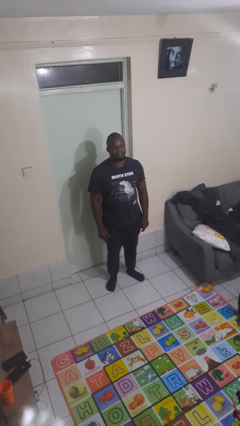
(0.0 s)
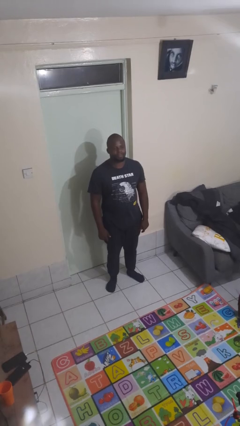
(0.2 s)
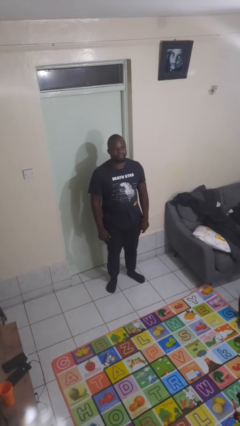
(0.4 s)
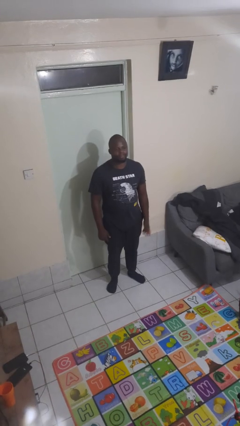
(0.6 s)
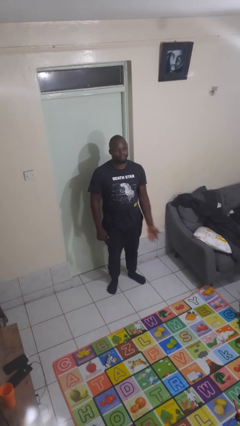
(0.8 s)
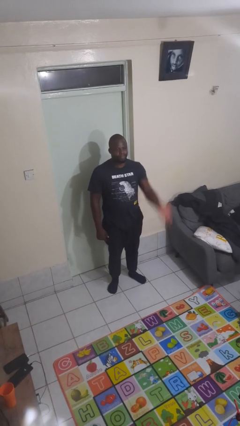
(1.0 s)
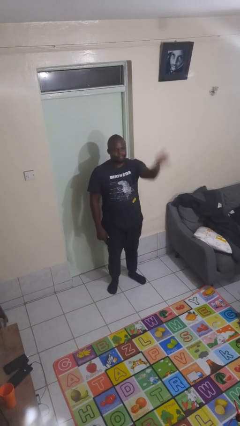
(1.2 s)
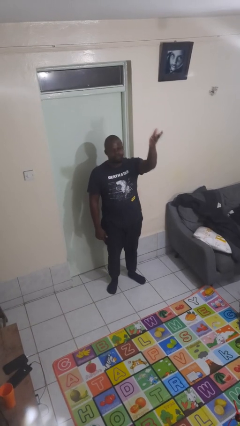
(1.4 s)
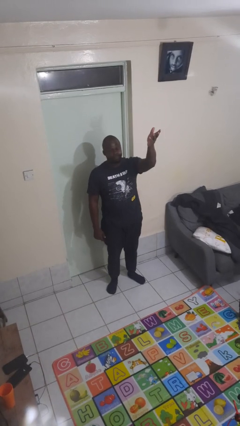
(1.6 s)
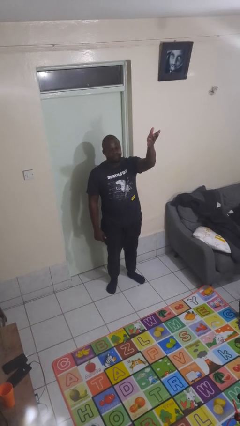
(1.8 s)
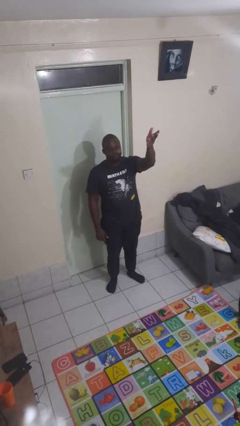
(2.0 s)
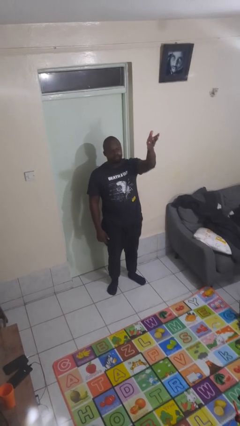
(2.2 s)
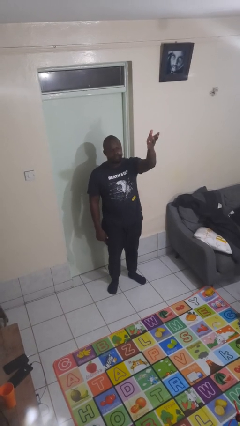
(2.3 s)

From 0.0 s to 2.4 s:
person gestures swipe up

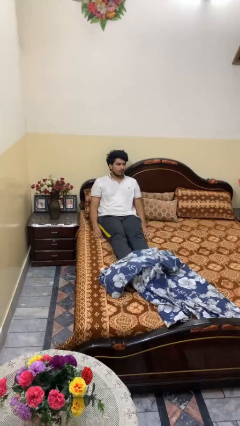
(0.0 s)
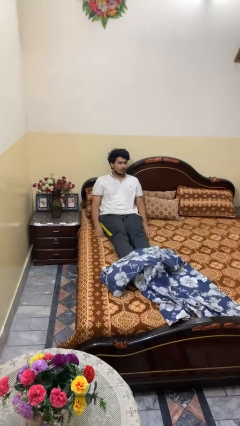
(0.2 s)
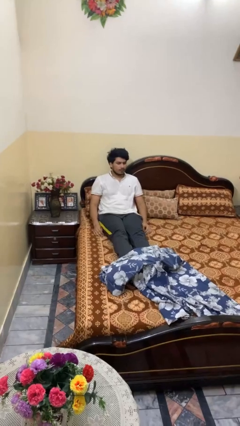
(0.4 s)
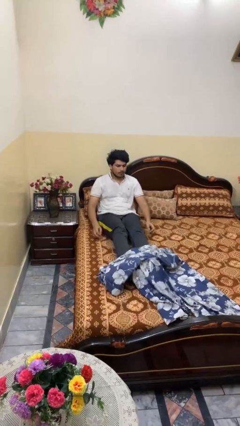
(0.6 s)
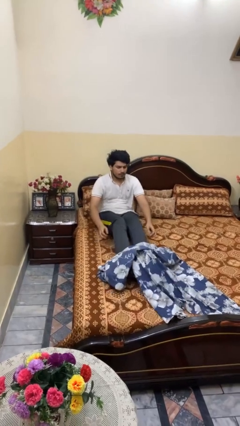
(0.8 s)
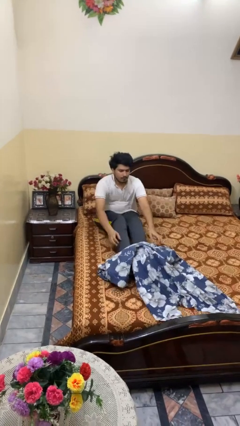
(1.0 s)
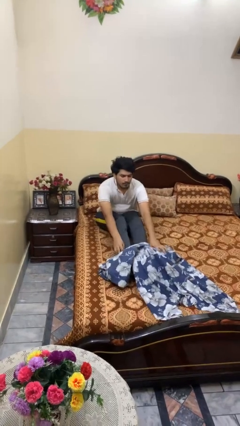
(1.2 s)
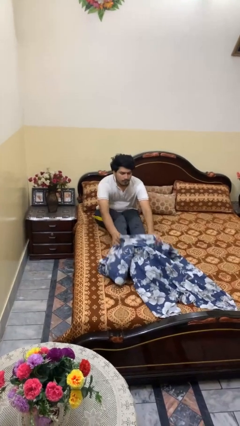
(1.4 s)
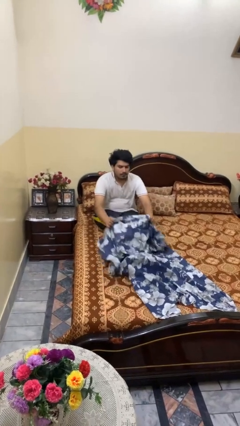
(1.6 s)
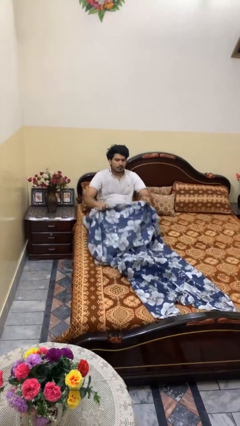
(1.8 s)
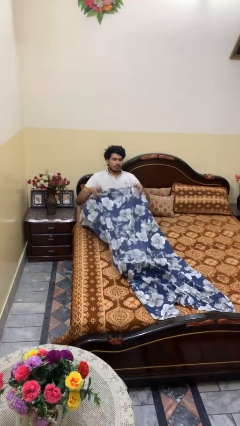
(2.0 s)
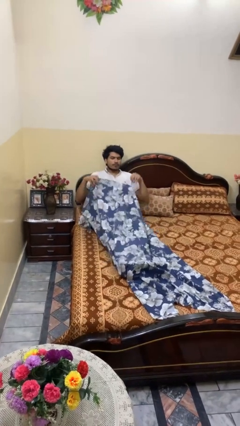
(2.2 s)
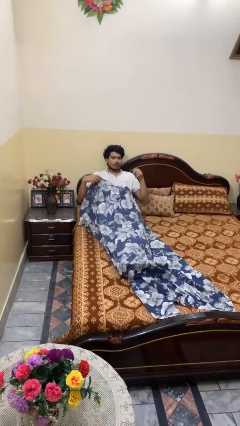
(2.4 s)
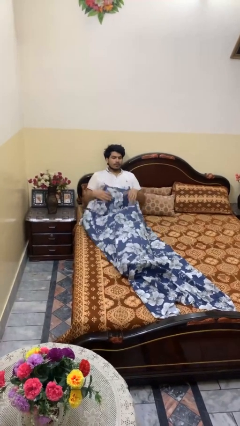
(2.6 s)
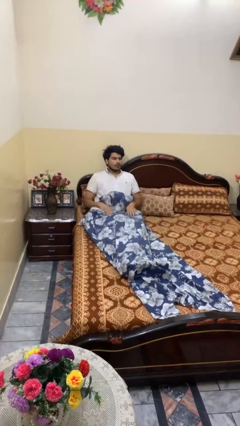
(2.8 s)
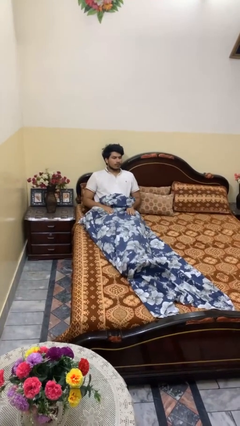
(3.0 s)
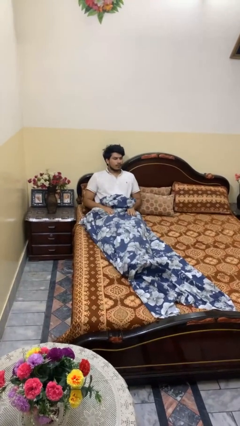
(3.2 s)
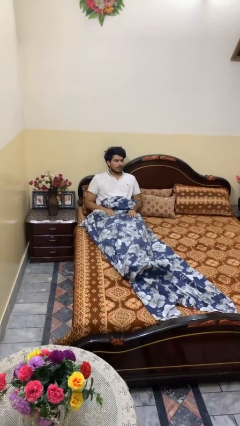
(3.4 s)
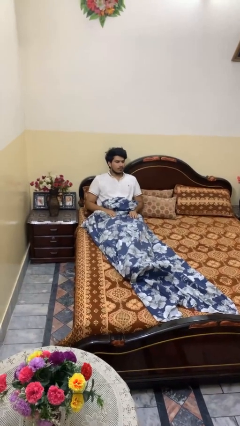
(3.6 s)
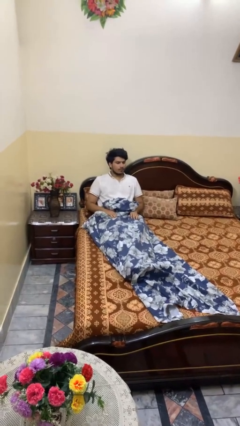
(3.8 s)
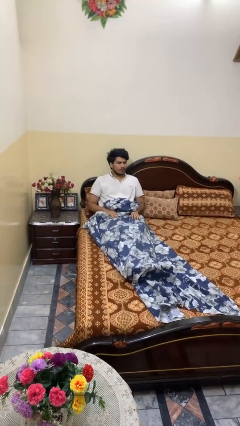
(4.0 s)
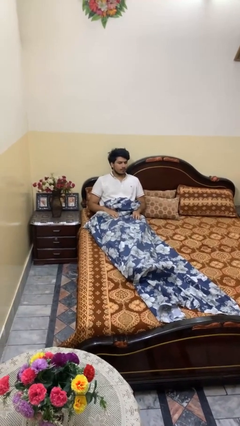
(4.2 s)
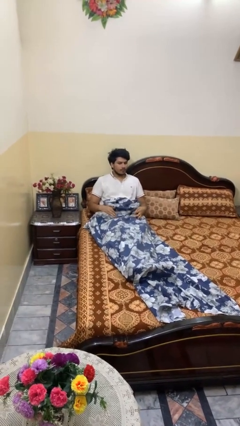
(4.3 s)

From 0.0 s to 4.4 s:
person covers with bedsheets

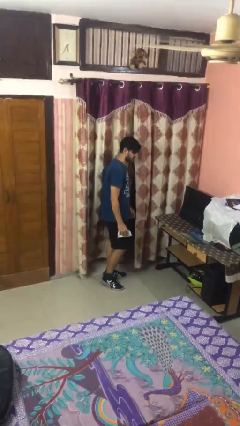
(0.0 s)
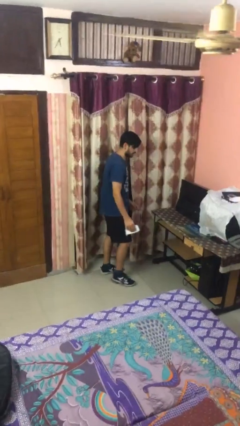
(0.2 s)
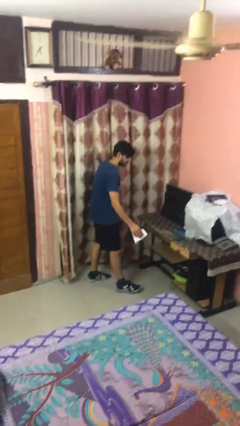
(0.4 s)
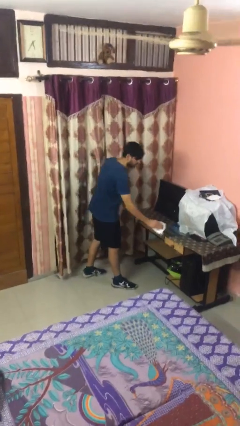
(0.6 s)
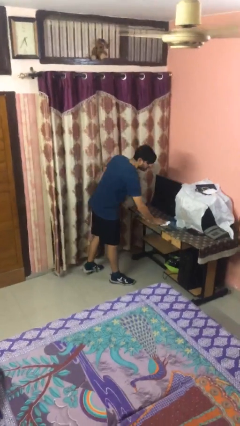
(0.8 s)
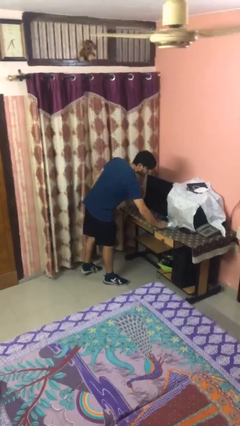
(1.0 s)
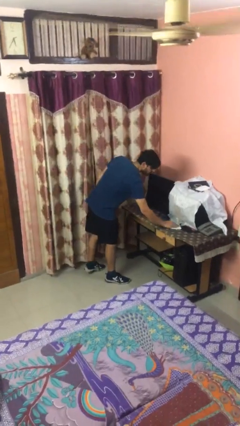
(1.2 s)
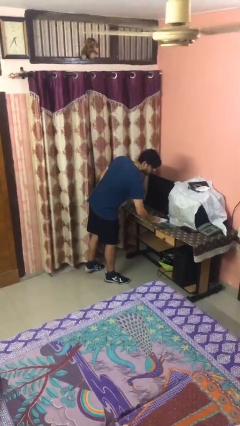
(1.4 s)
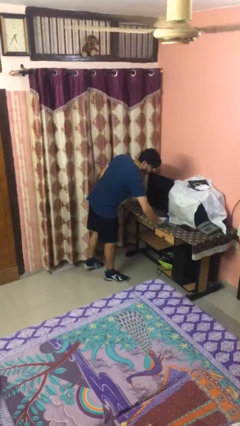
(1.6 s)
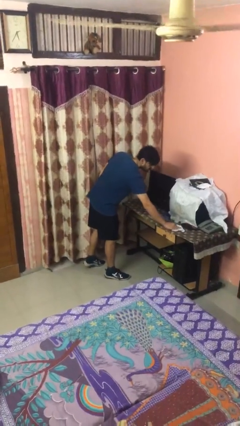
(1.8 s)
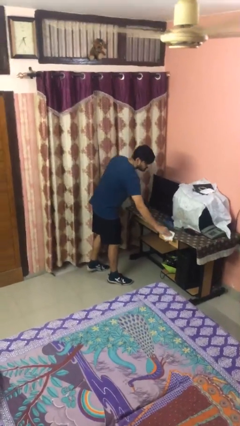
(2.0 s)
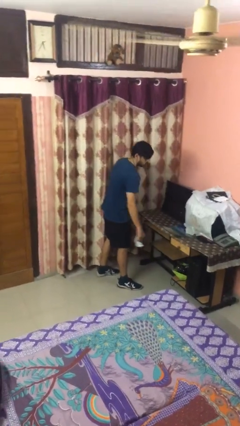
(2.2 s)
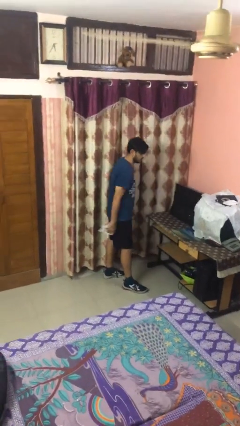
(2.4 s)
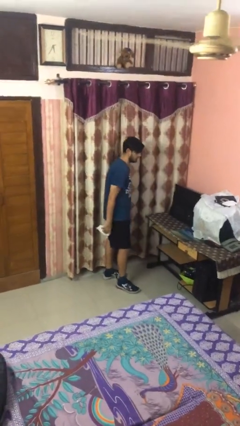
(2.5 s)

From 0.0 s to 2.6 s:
person cleans table with rag

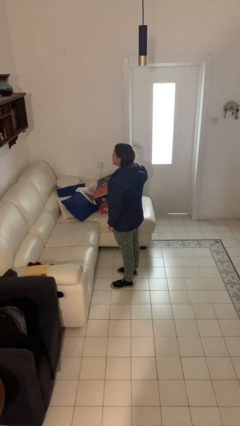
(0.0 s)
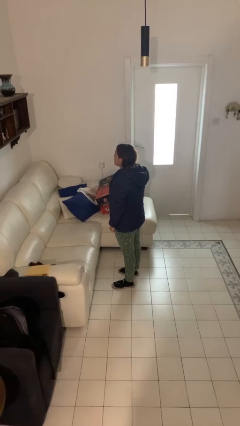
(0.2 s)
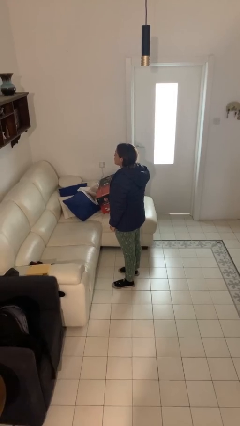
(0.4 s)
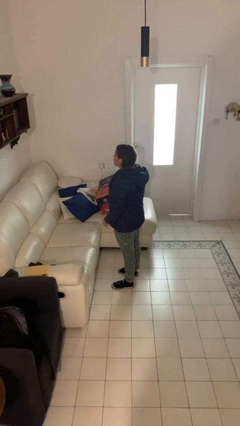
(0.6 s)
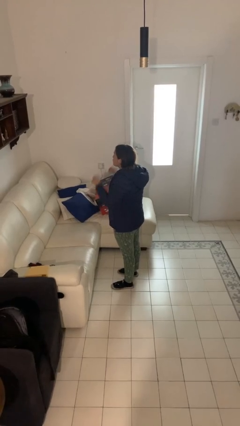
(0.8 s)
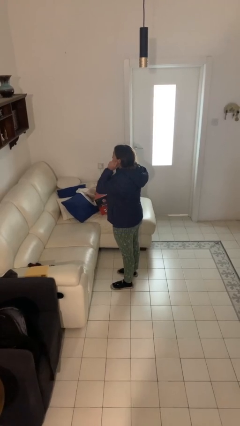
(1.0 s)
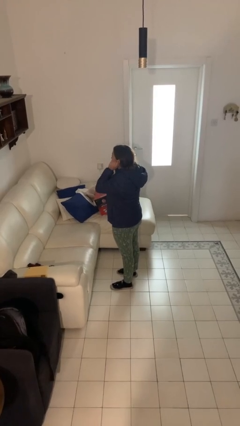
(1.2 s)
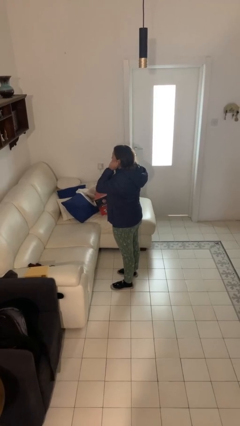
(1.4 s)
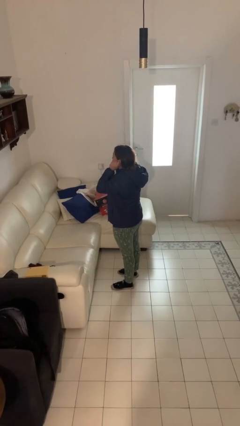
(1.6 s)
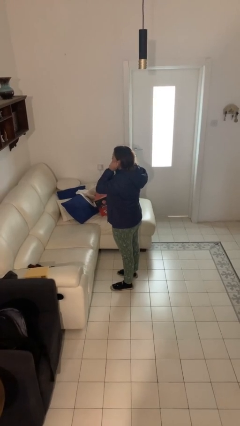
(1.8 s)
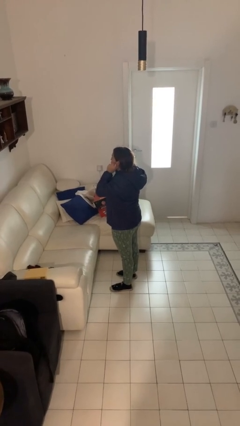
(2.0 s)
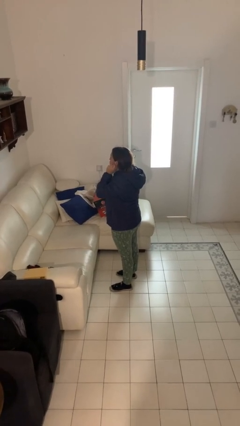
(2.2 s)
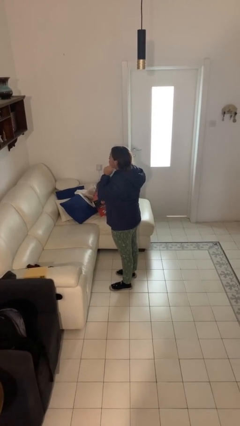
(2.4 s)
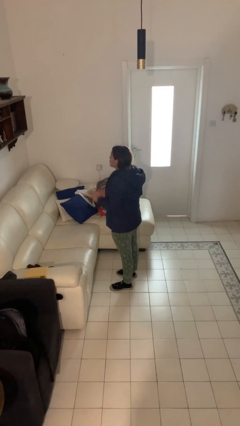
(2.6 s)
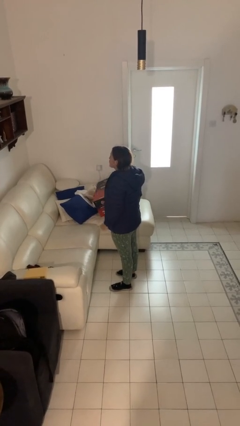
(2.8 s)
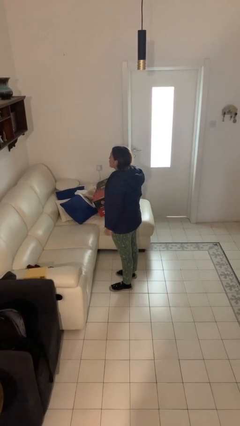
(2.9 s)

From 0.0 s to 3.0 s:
person touches earlobe

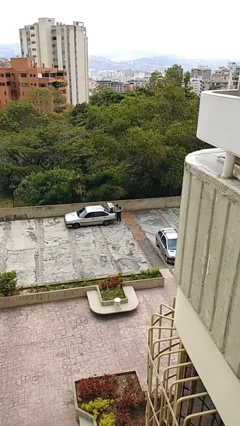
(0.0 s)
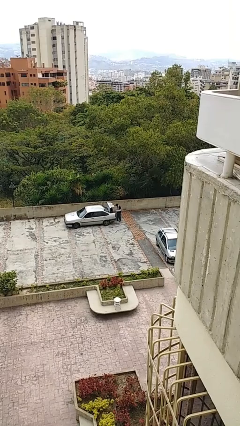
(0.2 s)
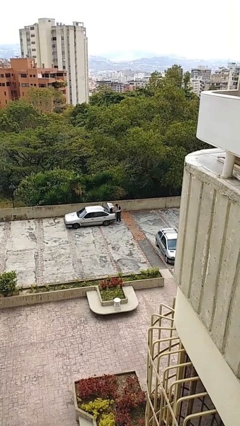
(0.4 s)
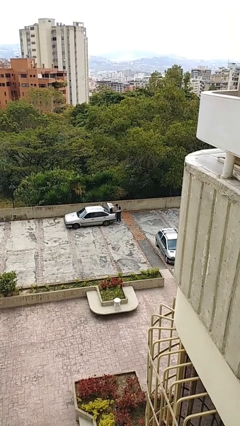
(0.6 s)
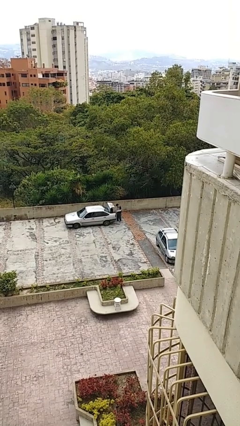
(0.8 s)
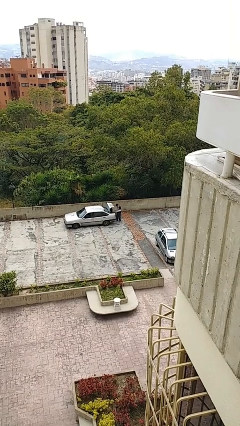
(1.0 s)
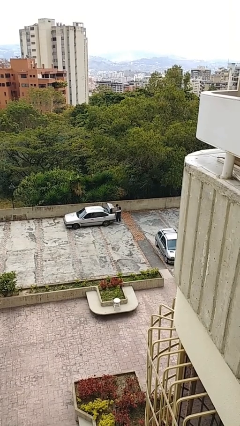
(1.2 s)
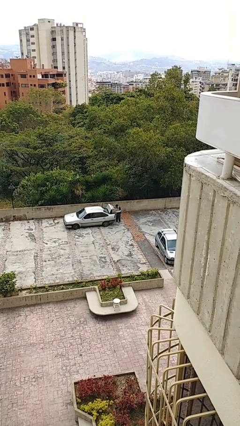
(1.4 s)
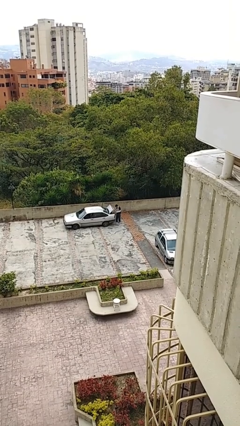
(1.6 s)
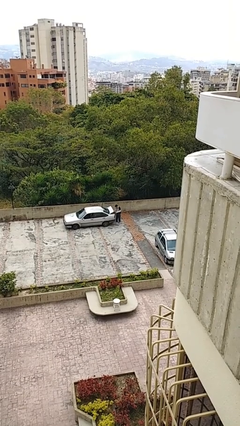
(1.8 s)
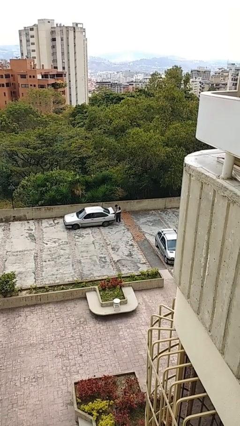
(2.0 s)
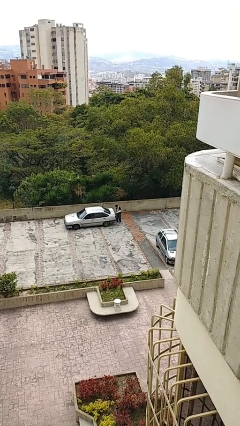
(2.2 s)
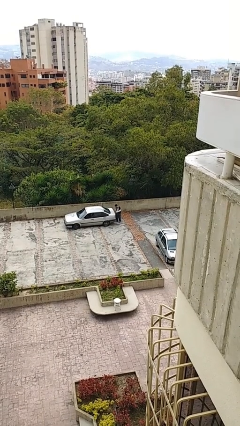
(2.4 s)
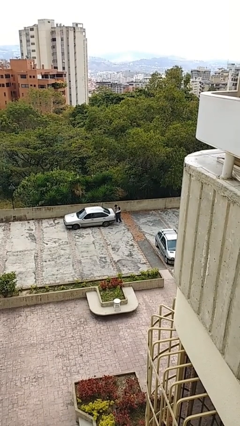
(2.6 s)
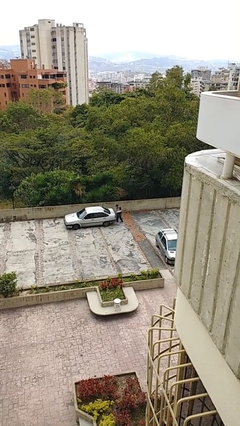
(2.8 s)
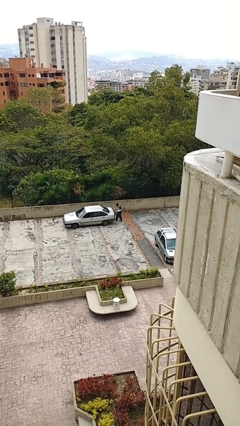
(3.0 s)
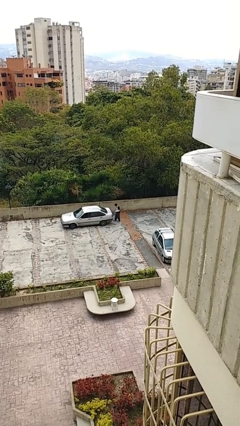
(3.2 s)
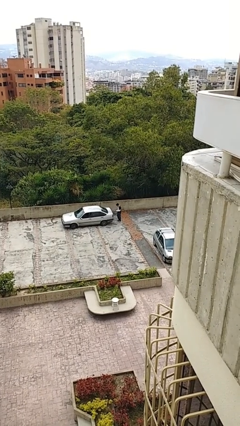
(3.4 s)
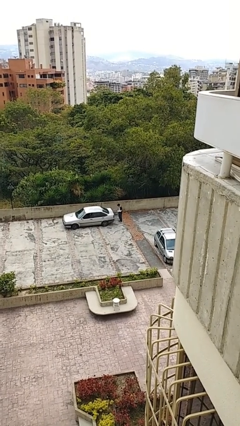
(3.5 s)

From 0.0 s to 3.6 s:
person closes car trunk

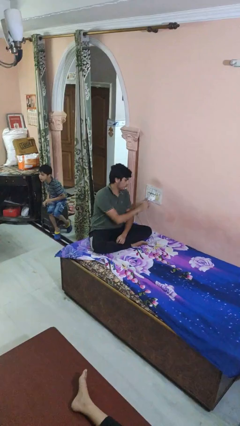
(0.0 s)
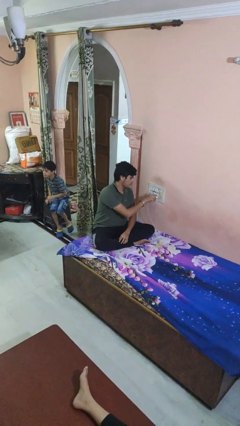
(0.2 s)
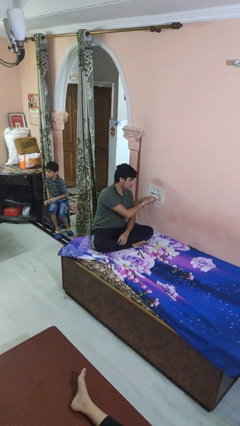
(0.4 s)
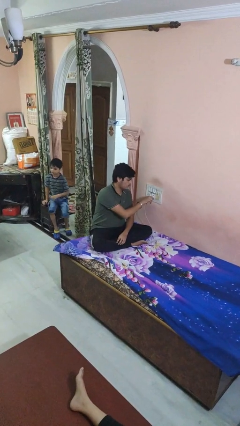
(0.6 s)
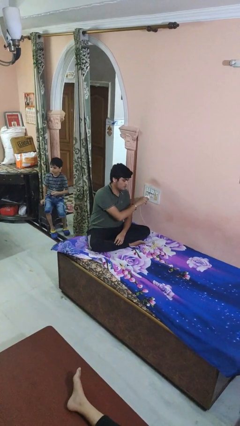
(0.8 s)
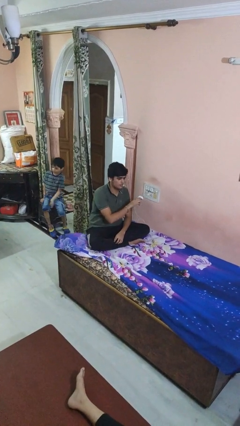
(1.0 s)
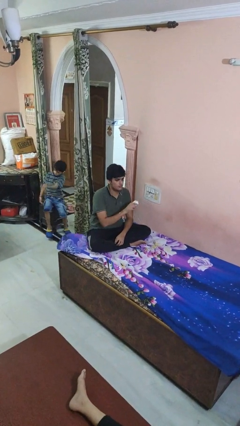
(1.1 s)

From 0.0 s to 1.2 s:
person unplugs from electrical socket
